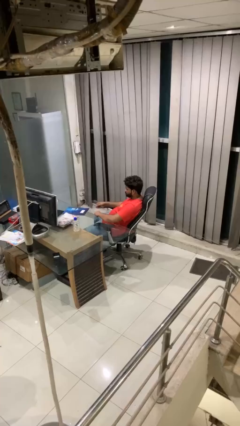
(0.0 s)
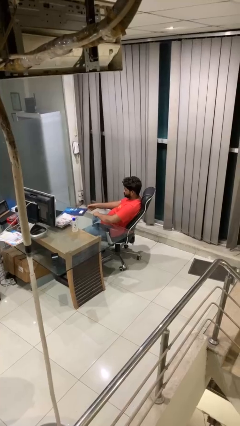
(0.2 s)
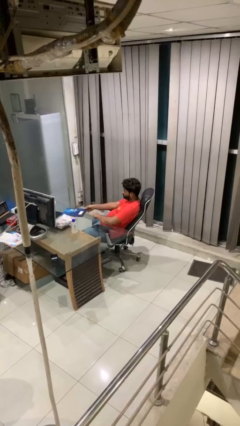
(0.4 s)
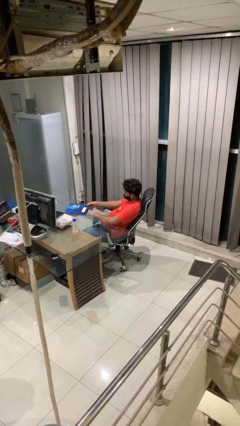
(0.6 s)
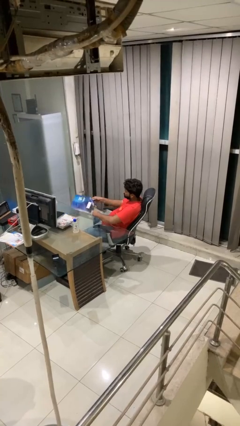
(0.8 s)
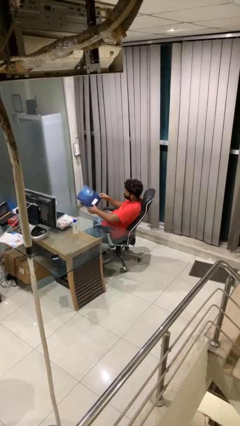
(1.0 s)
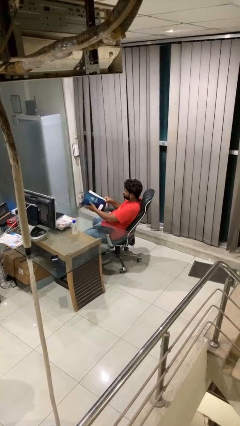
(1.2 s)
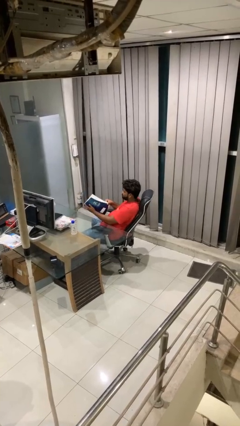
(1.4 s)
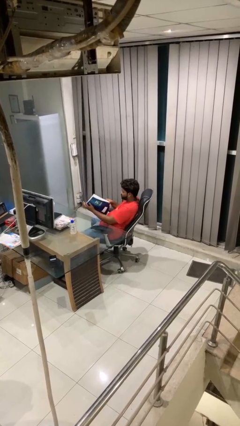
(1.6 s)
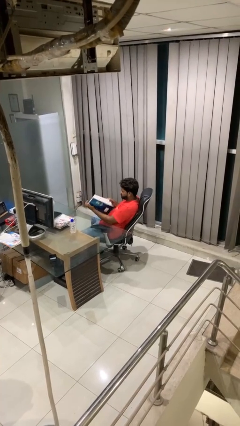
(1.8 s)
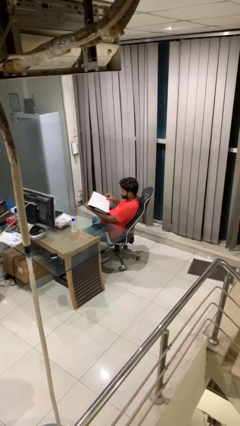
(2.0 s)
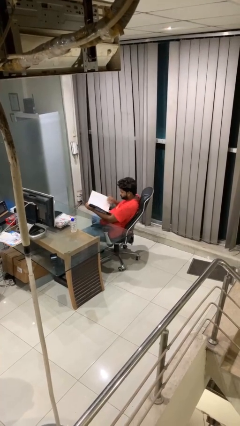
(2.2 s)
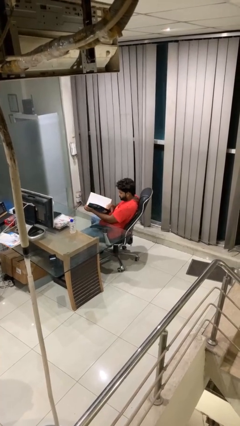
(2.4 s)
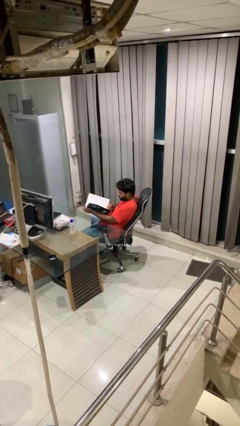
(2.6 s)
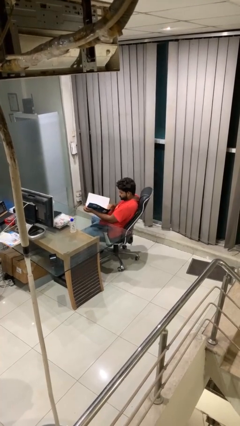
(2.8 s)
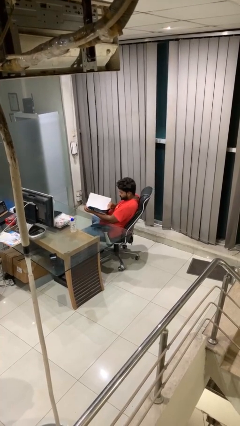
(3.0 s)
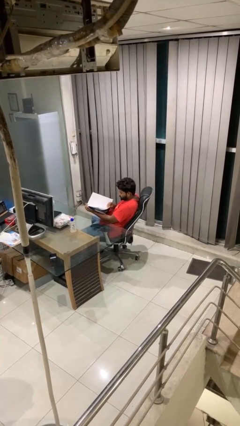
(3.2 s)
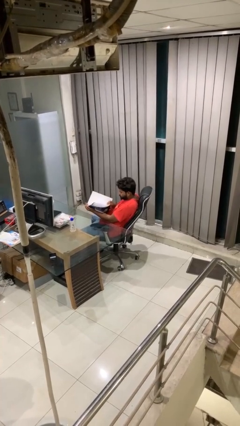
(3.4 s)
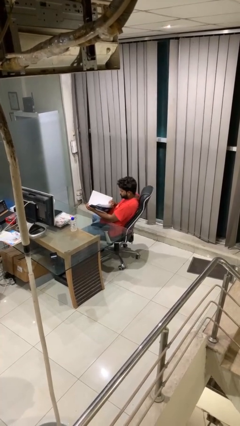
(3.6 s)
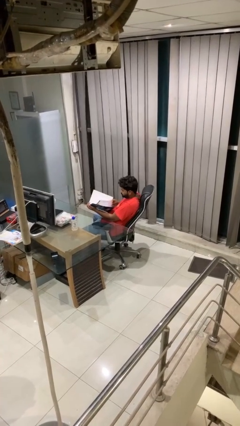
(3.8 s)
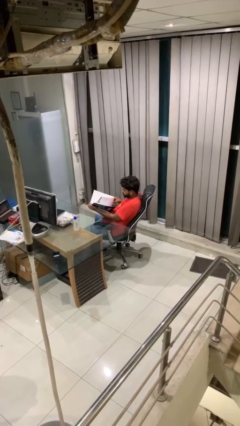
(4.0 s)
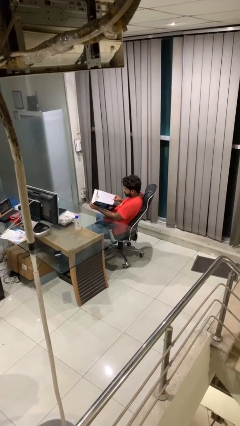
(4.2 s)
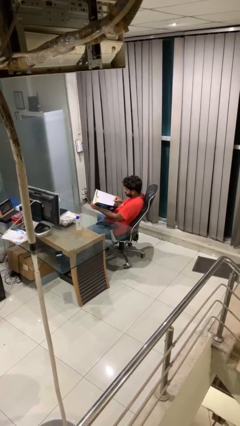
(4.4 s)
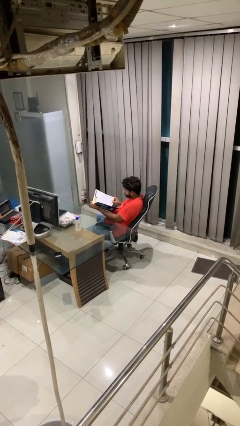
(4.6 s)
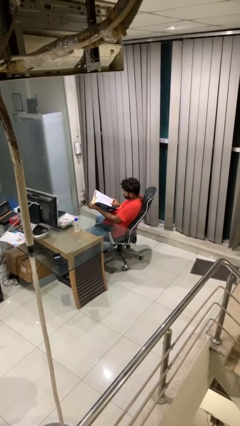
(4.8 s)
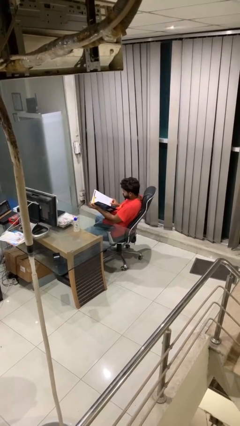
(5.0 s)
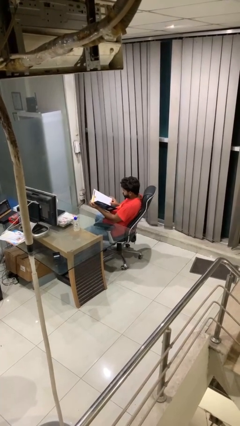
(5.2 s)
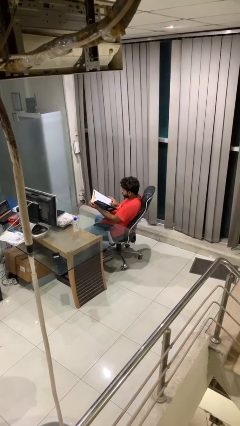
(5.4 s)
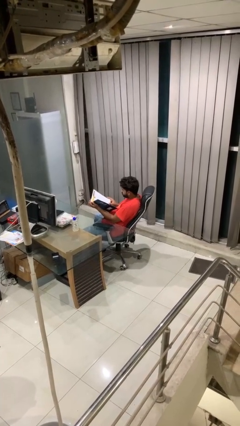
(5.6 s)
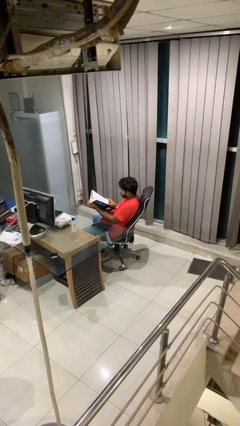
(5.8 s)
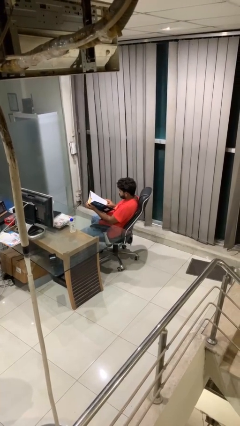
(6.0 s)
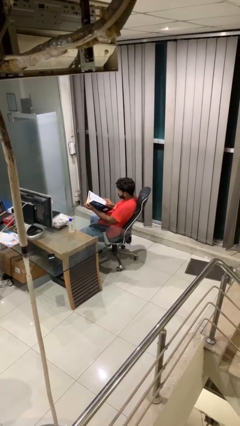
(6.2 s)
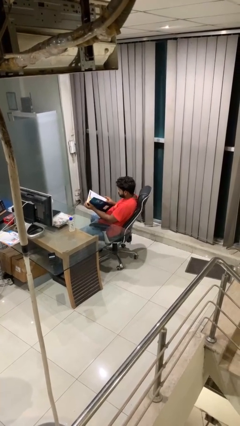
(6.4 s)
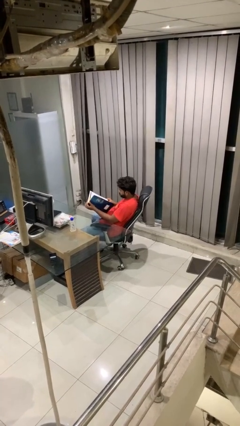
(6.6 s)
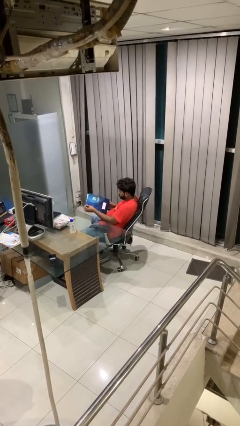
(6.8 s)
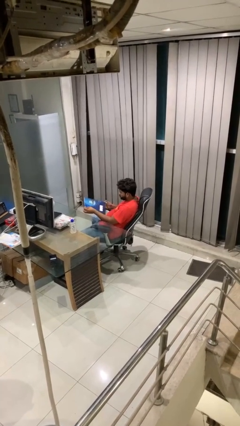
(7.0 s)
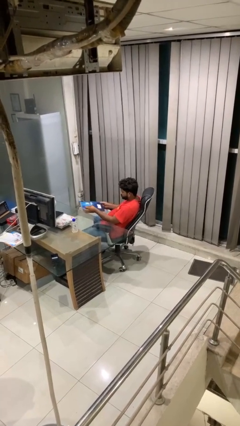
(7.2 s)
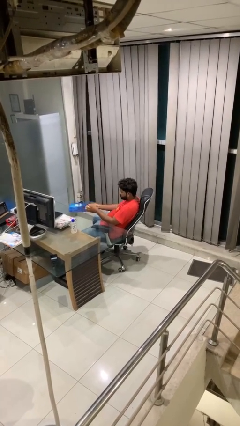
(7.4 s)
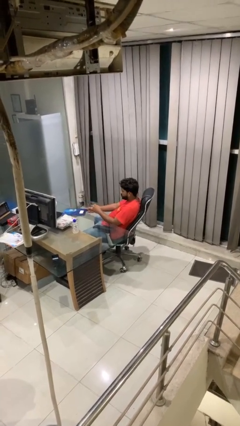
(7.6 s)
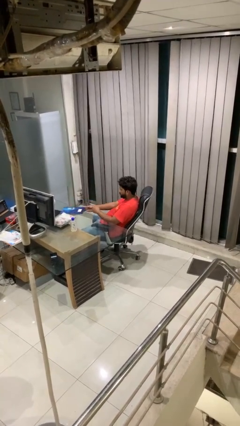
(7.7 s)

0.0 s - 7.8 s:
person reads magazine

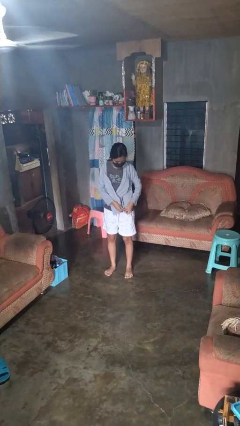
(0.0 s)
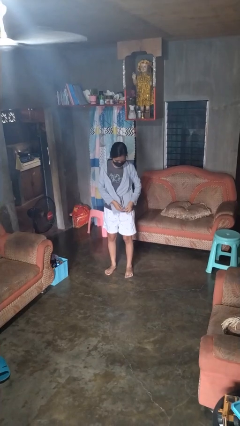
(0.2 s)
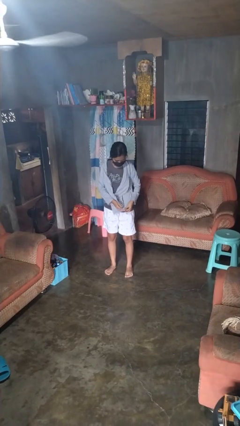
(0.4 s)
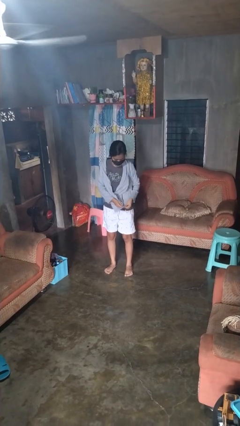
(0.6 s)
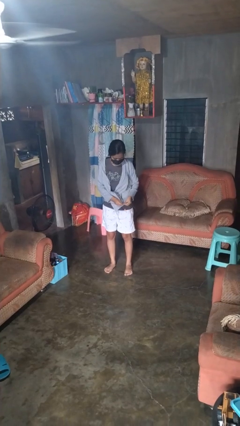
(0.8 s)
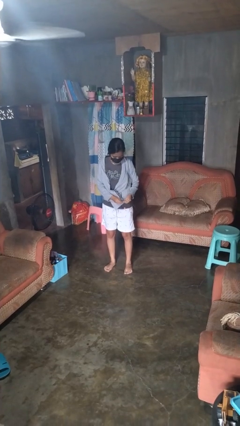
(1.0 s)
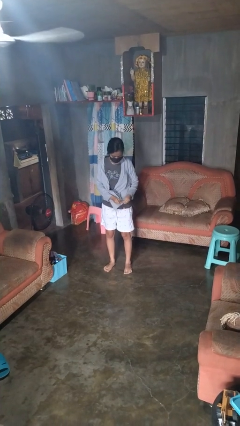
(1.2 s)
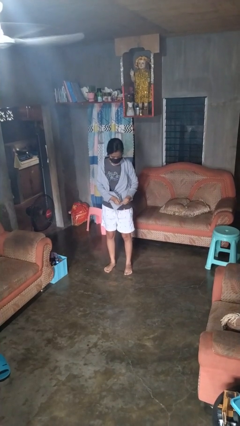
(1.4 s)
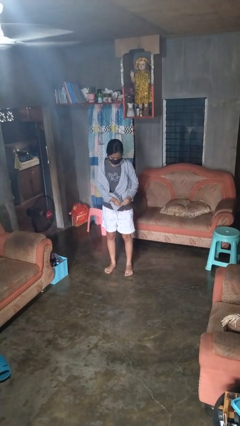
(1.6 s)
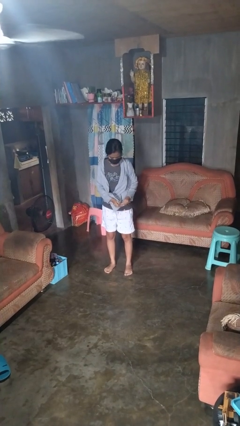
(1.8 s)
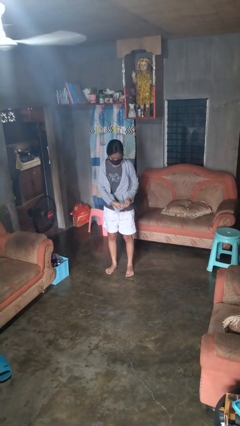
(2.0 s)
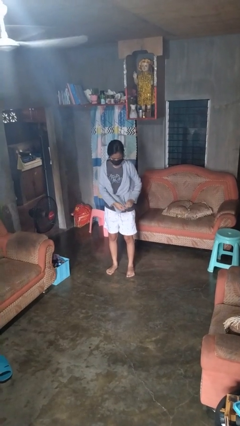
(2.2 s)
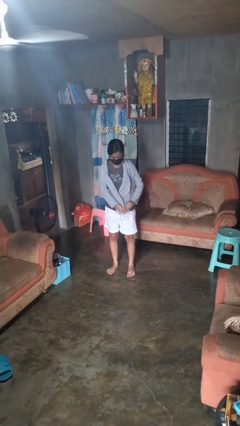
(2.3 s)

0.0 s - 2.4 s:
person zips up jacket

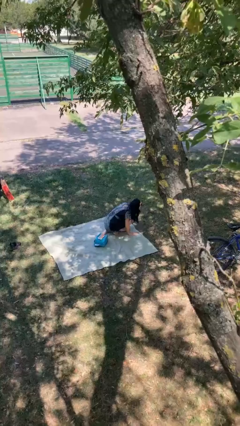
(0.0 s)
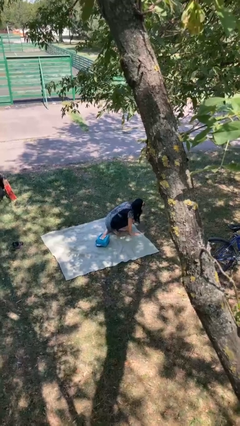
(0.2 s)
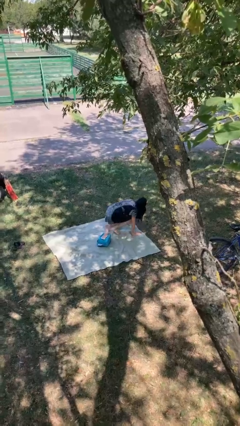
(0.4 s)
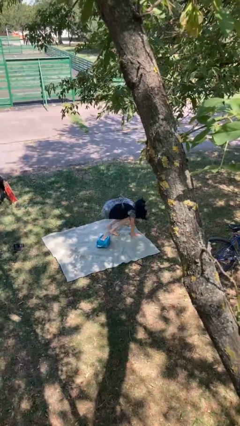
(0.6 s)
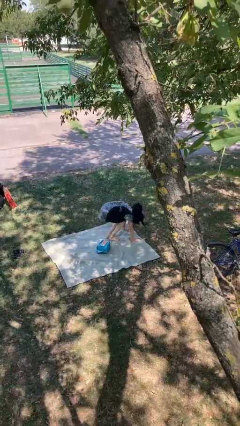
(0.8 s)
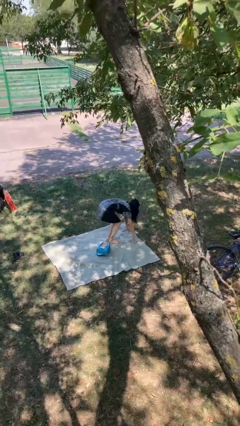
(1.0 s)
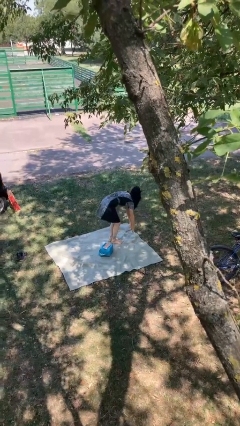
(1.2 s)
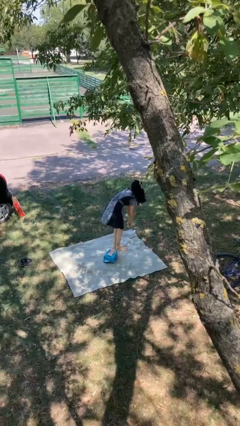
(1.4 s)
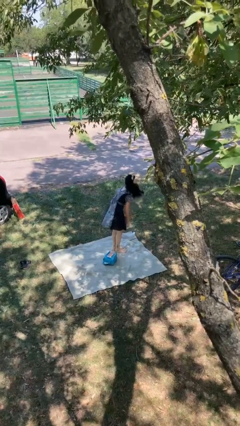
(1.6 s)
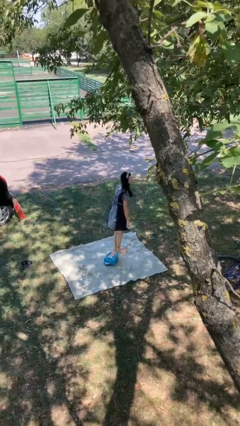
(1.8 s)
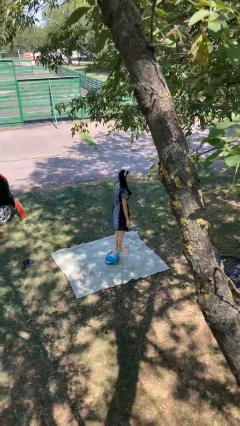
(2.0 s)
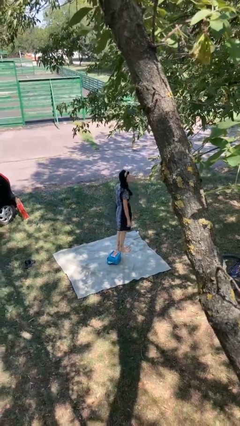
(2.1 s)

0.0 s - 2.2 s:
person stands up from floor

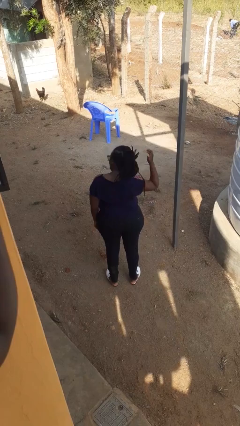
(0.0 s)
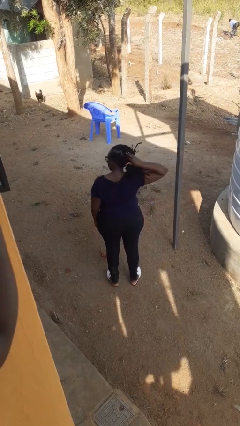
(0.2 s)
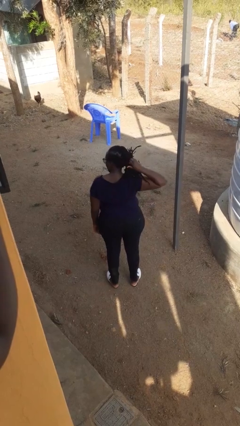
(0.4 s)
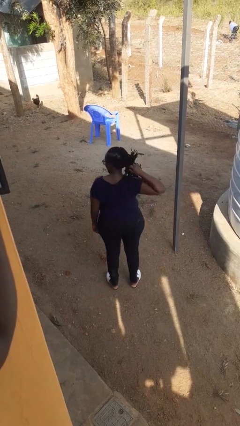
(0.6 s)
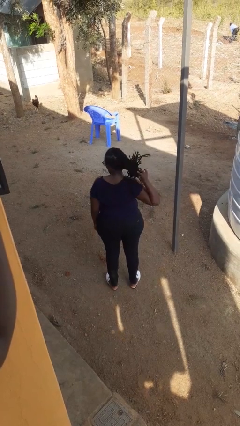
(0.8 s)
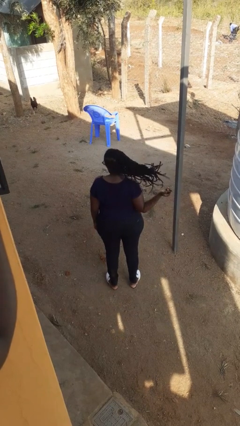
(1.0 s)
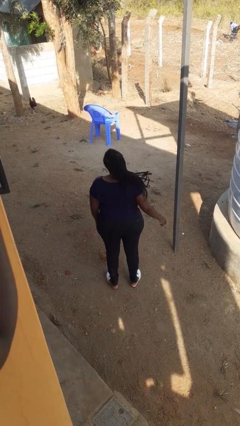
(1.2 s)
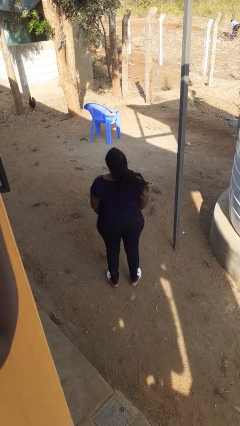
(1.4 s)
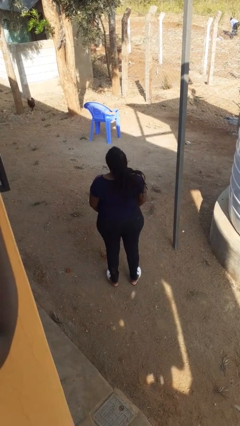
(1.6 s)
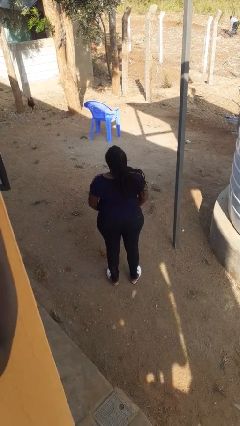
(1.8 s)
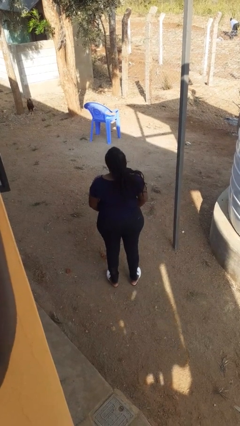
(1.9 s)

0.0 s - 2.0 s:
person takes off hairtie

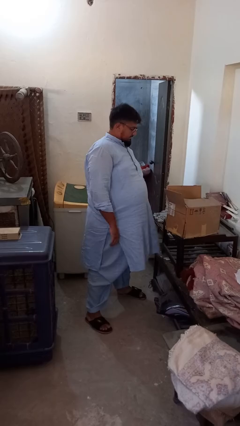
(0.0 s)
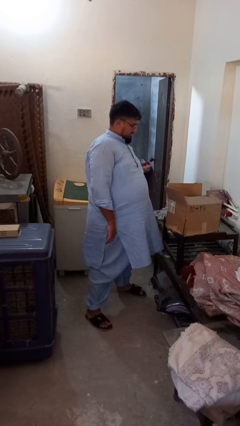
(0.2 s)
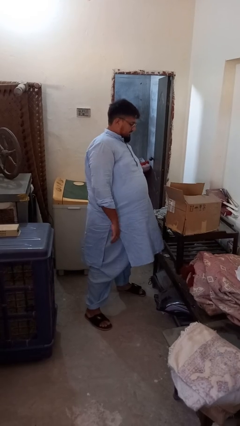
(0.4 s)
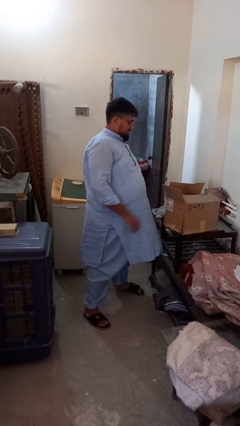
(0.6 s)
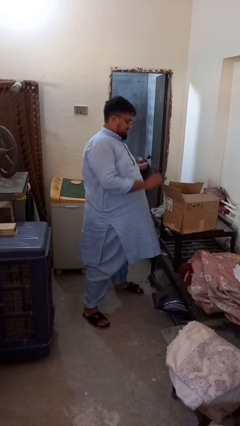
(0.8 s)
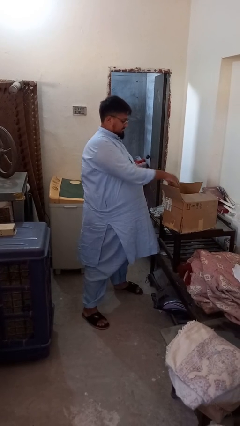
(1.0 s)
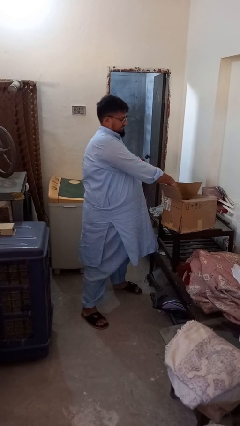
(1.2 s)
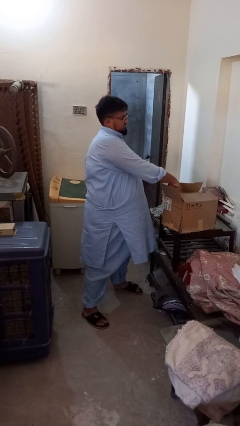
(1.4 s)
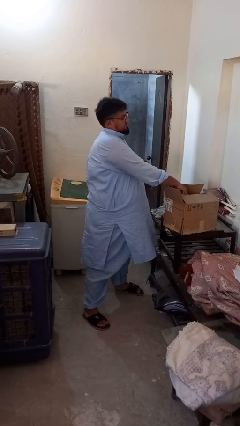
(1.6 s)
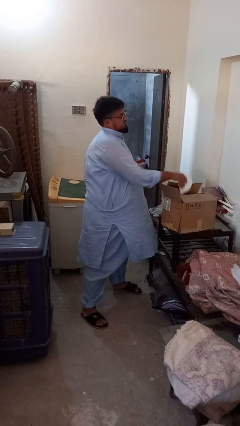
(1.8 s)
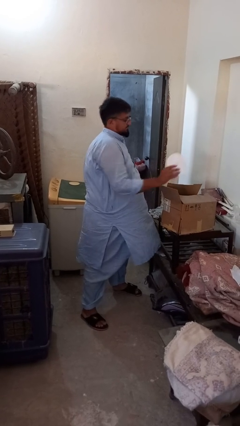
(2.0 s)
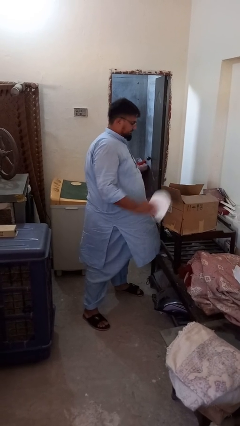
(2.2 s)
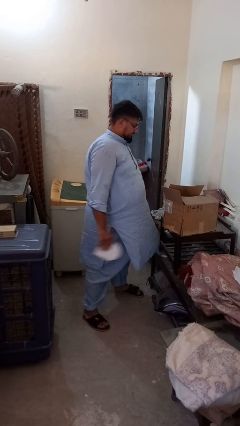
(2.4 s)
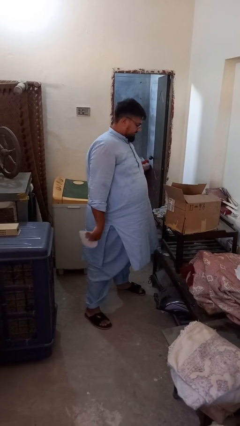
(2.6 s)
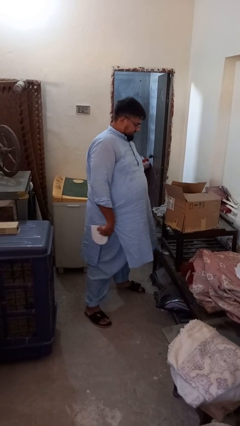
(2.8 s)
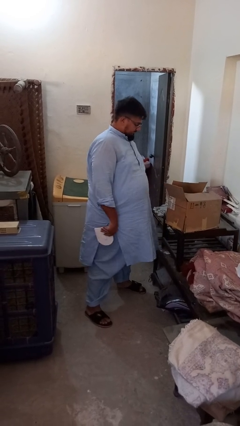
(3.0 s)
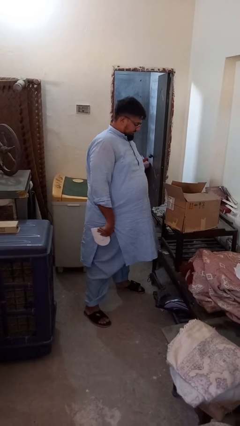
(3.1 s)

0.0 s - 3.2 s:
person takes object from box
